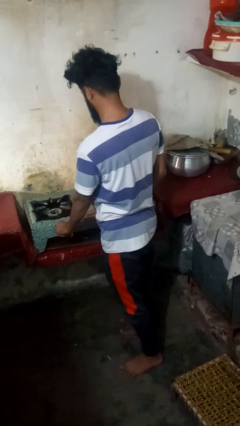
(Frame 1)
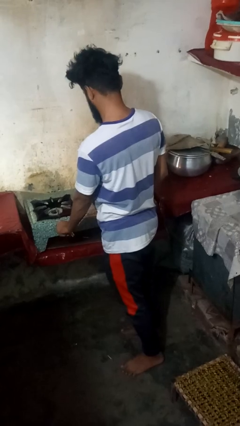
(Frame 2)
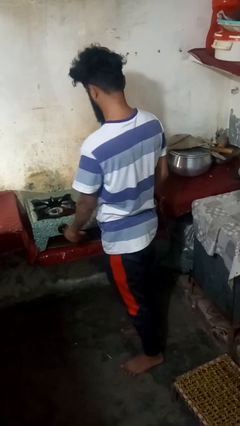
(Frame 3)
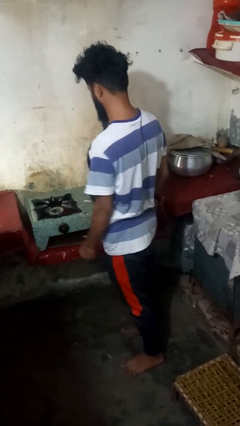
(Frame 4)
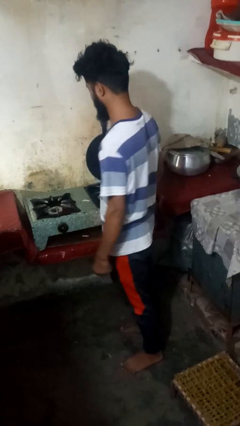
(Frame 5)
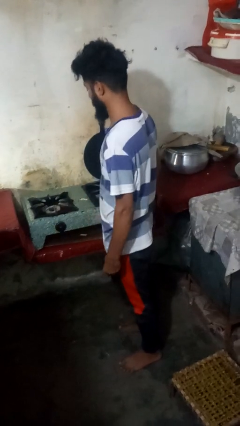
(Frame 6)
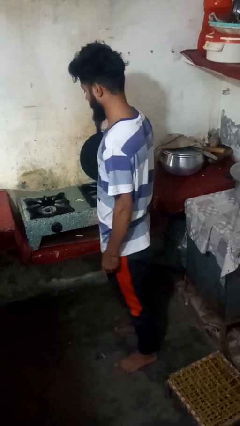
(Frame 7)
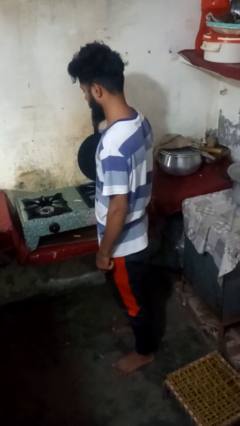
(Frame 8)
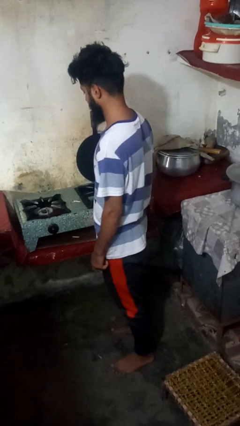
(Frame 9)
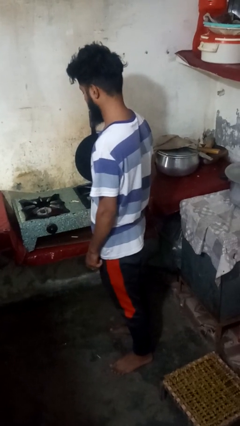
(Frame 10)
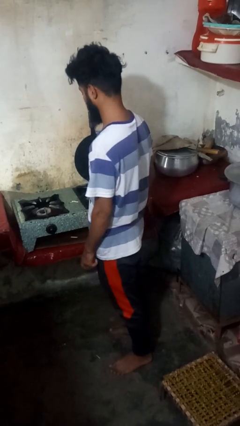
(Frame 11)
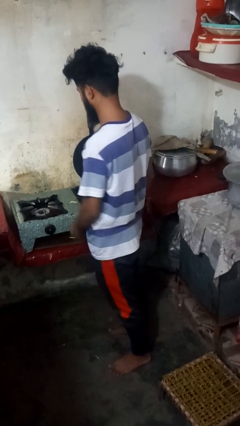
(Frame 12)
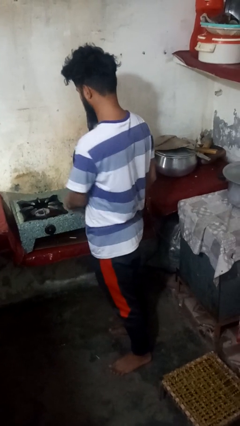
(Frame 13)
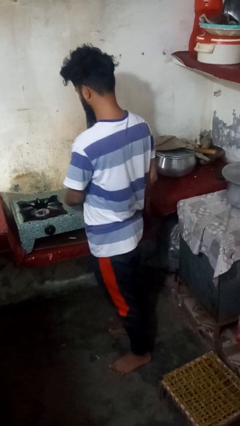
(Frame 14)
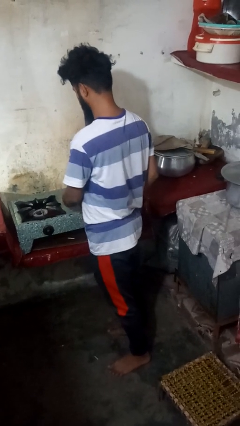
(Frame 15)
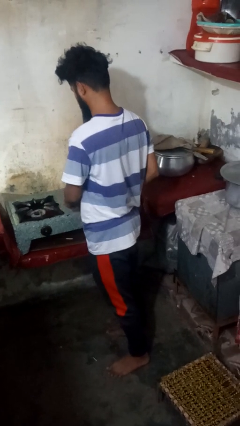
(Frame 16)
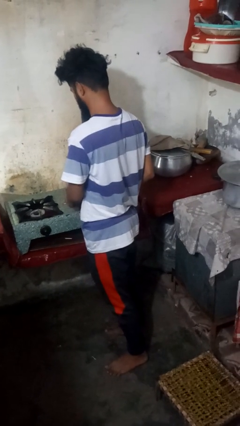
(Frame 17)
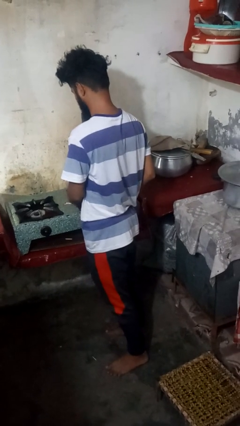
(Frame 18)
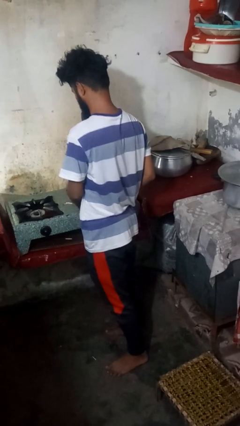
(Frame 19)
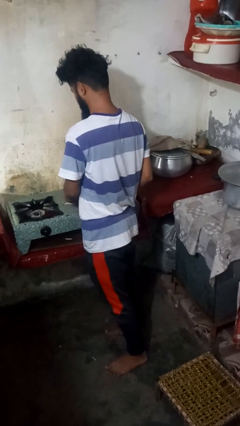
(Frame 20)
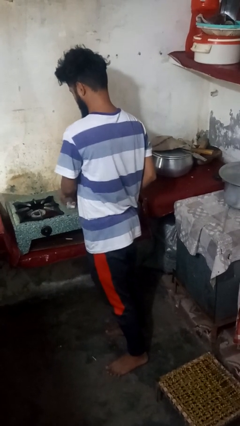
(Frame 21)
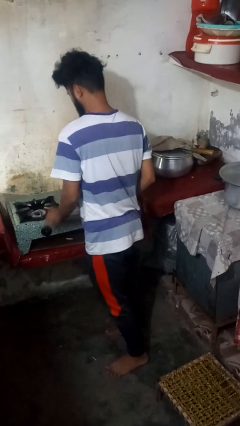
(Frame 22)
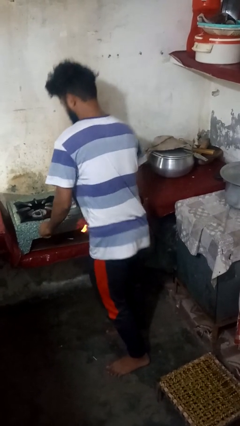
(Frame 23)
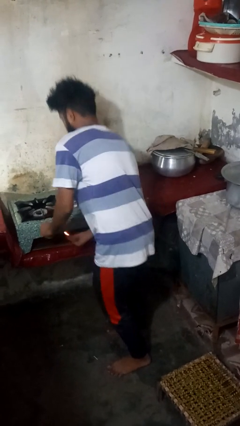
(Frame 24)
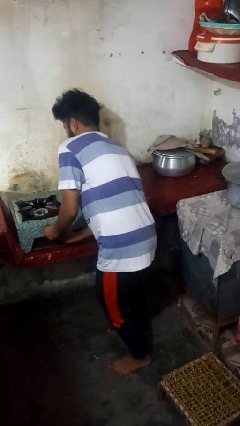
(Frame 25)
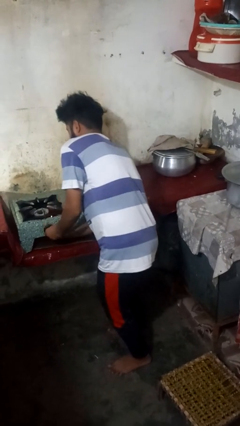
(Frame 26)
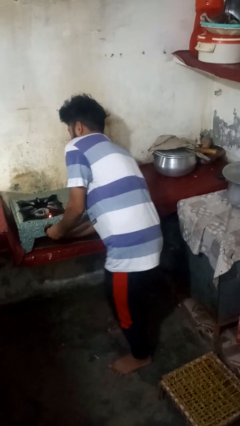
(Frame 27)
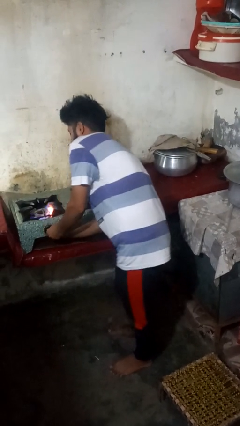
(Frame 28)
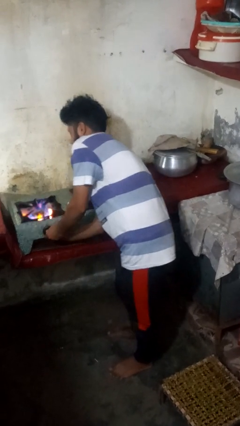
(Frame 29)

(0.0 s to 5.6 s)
person turns off stovetop

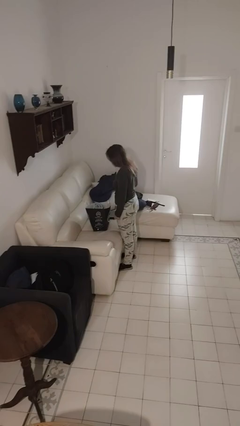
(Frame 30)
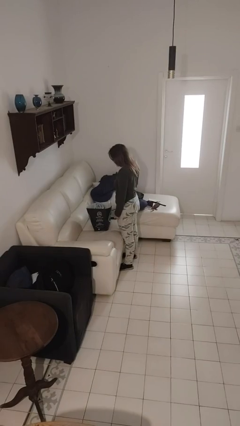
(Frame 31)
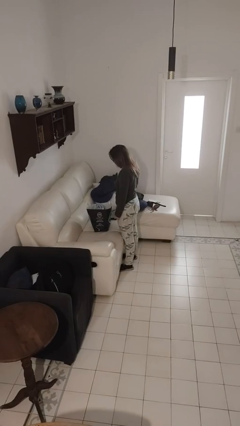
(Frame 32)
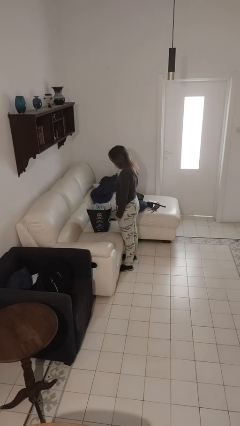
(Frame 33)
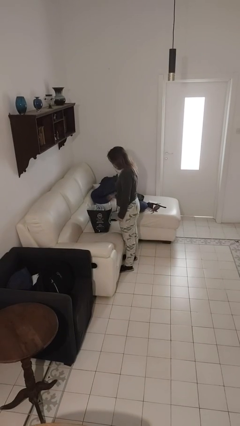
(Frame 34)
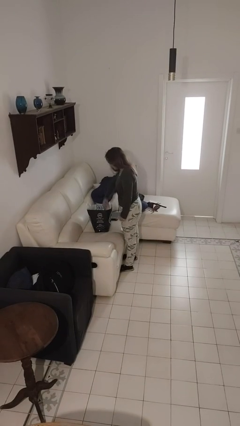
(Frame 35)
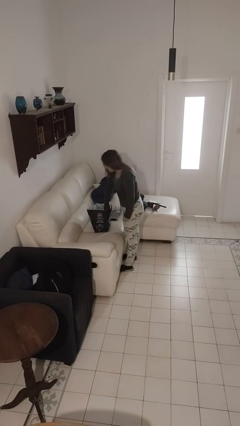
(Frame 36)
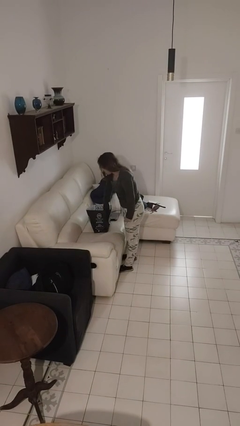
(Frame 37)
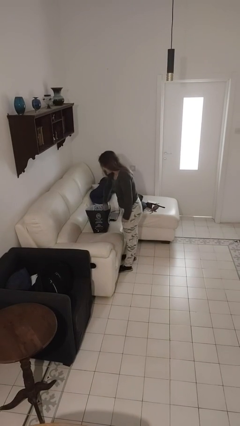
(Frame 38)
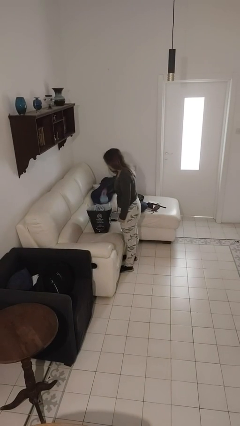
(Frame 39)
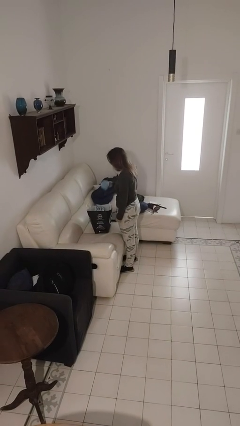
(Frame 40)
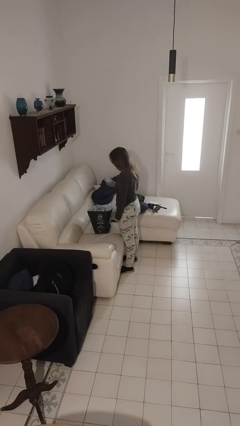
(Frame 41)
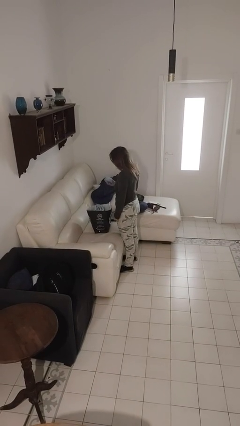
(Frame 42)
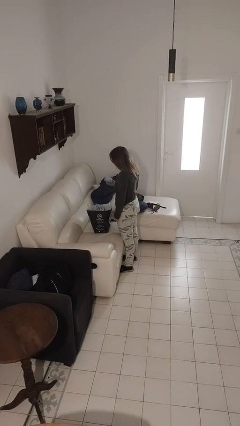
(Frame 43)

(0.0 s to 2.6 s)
person takes object from bag

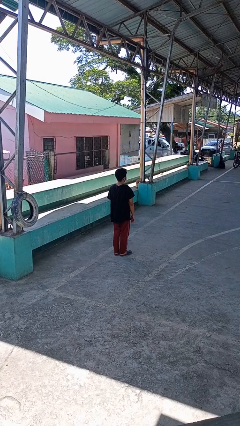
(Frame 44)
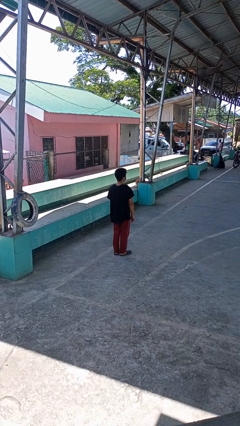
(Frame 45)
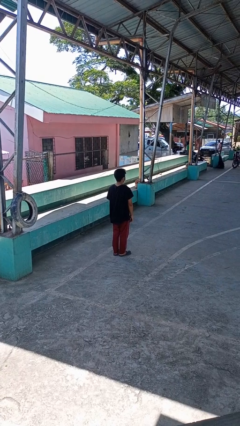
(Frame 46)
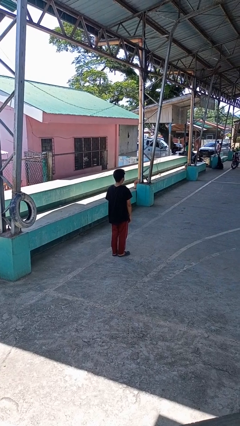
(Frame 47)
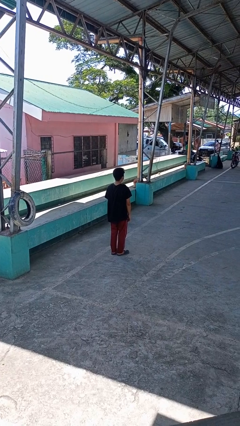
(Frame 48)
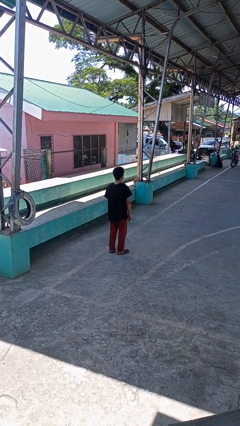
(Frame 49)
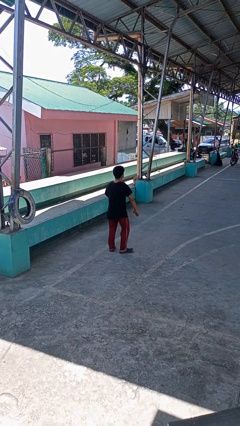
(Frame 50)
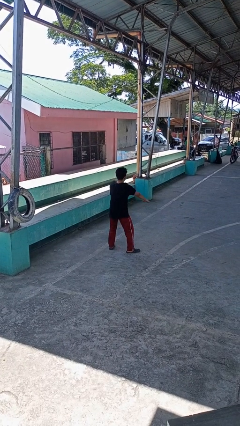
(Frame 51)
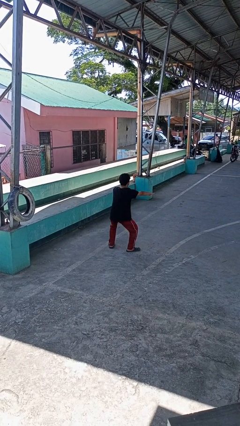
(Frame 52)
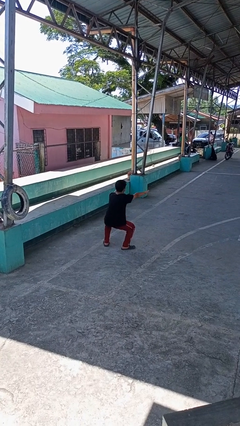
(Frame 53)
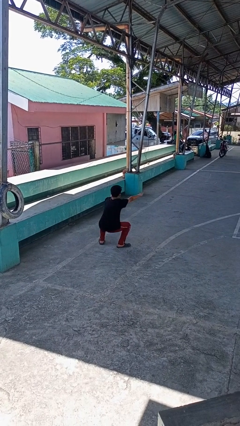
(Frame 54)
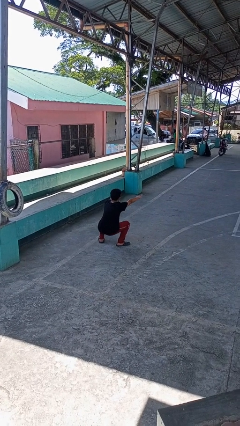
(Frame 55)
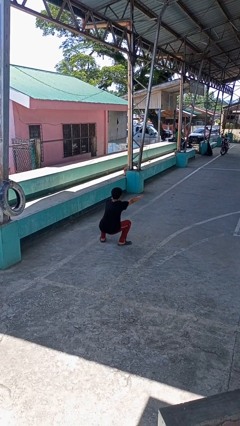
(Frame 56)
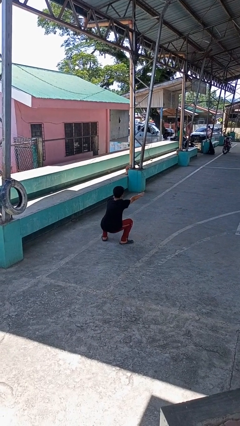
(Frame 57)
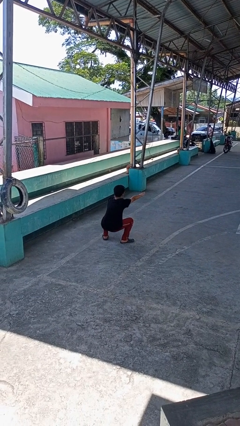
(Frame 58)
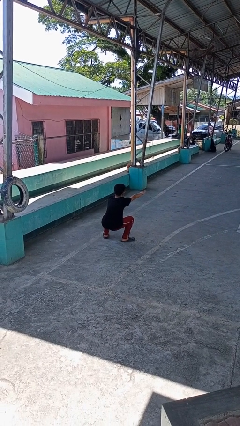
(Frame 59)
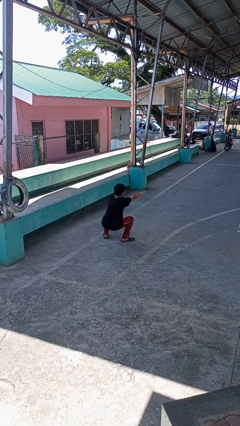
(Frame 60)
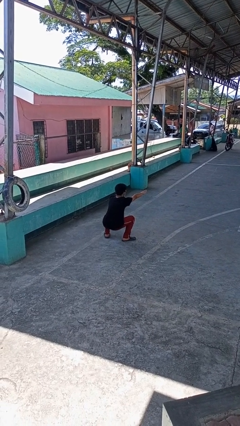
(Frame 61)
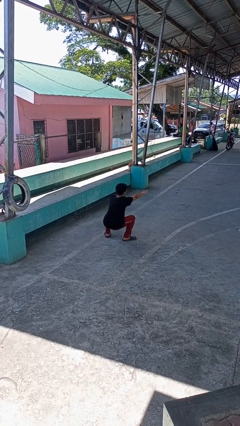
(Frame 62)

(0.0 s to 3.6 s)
person squats

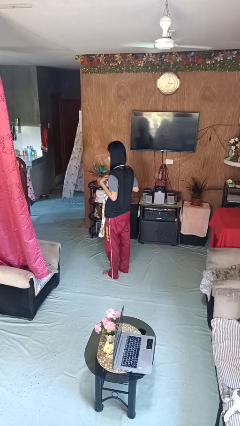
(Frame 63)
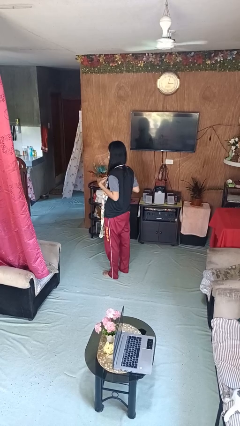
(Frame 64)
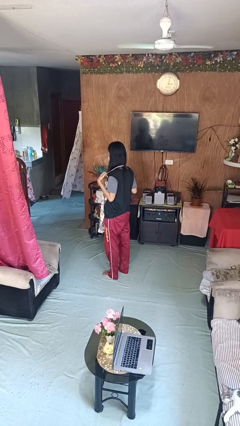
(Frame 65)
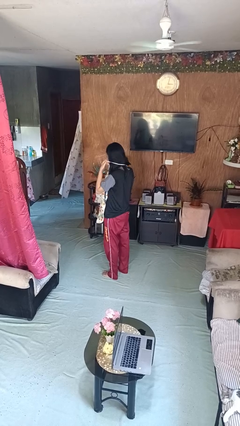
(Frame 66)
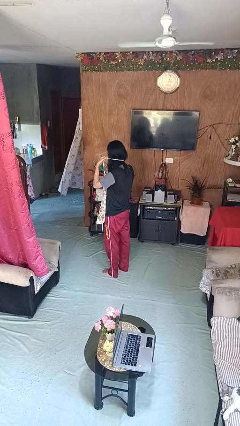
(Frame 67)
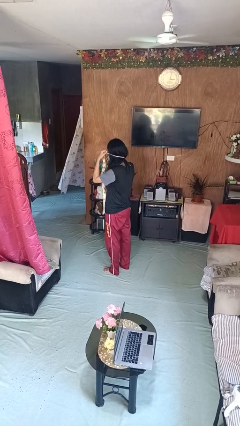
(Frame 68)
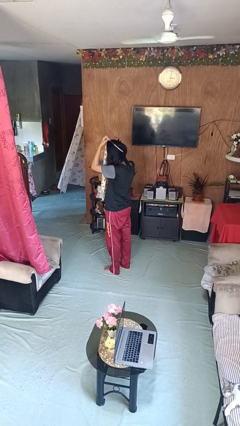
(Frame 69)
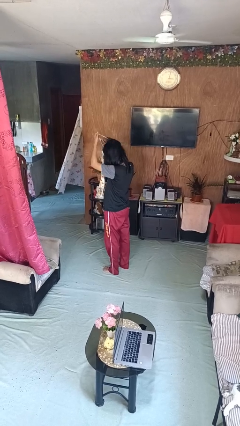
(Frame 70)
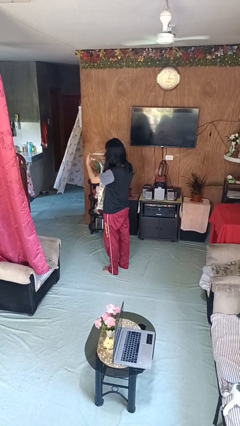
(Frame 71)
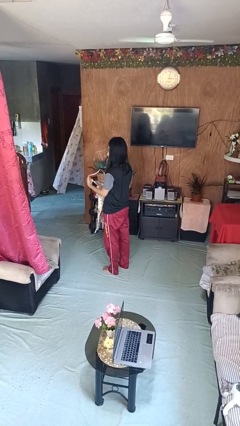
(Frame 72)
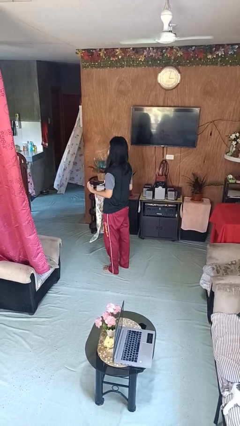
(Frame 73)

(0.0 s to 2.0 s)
person takes off apron

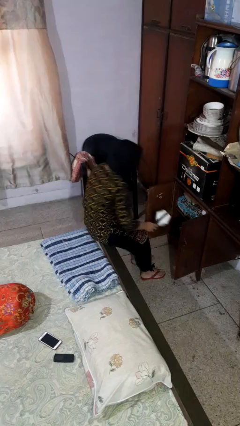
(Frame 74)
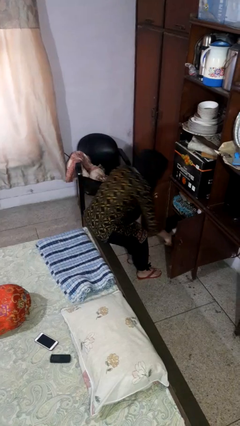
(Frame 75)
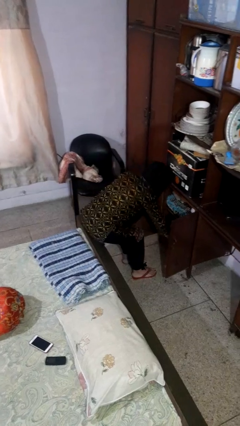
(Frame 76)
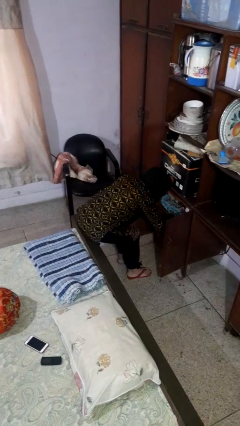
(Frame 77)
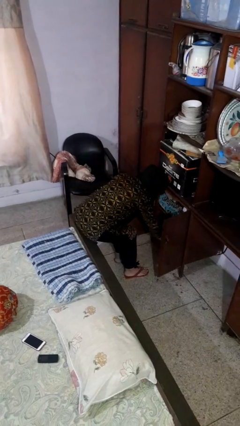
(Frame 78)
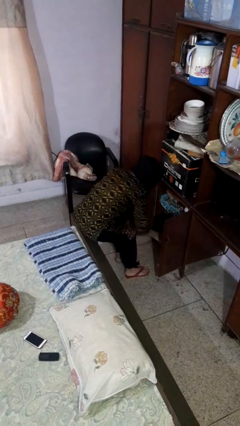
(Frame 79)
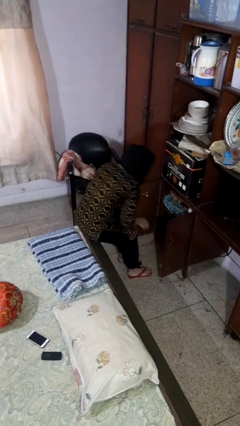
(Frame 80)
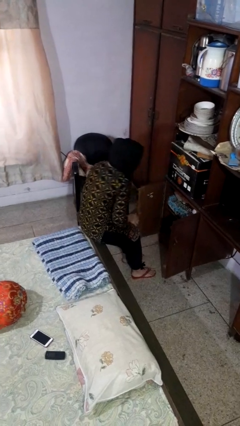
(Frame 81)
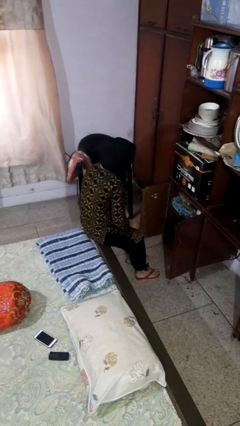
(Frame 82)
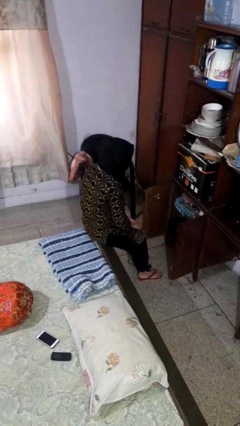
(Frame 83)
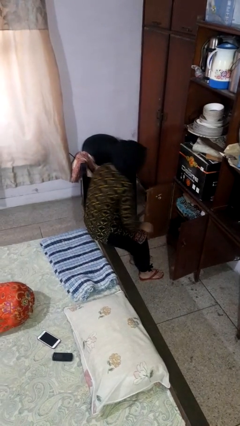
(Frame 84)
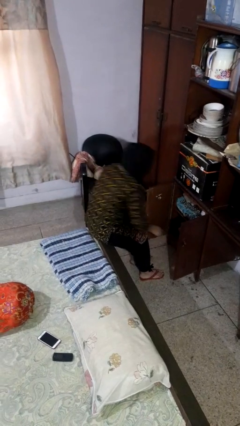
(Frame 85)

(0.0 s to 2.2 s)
person puts object in cabinet

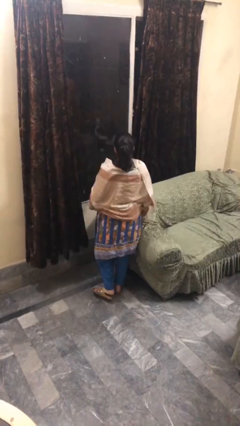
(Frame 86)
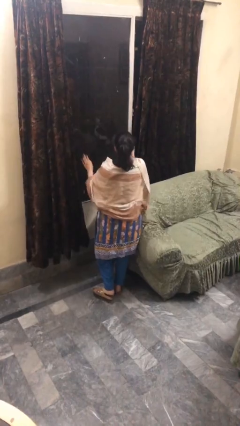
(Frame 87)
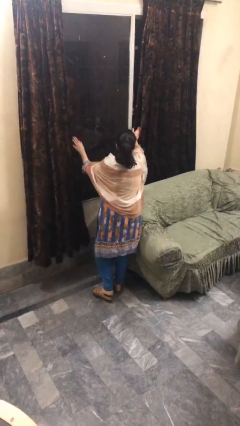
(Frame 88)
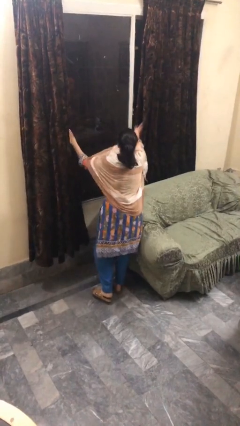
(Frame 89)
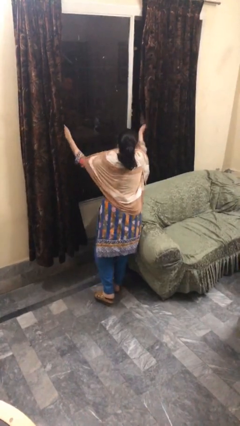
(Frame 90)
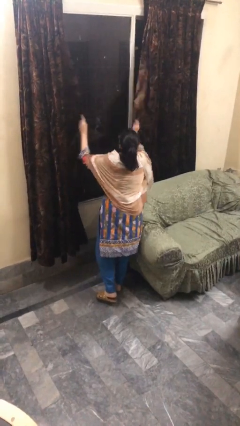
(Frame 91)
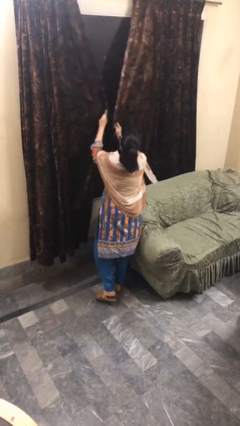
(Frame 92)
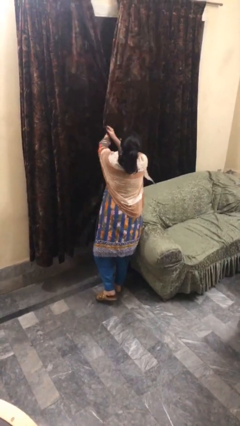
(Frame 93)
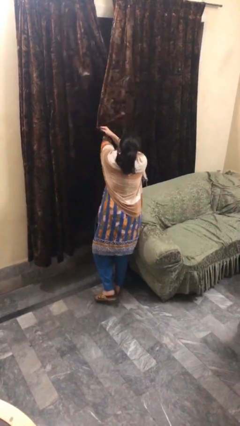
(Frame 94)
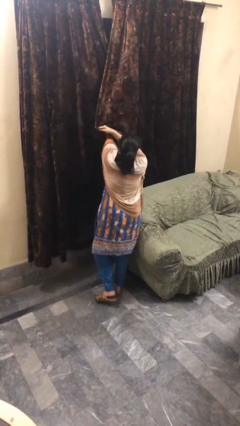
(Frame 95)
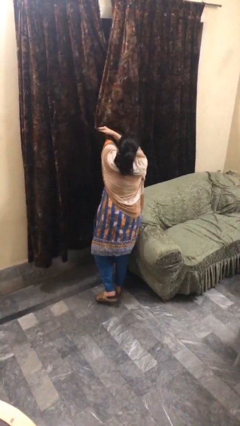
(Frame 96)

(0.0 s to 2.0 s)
person closes curtains
